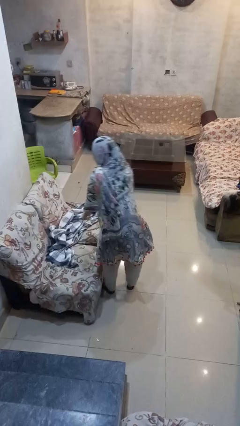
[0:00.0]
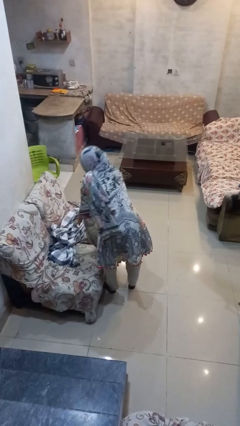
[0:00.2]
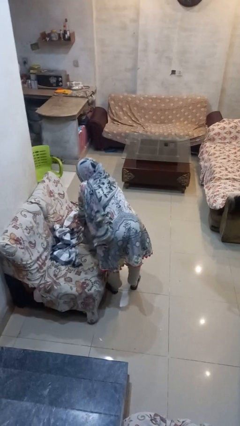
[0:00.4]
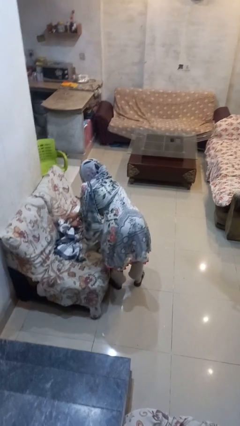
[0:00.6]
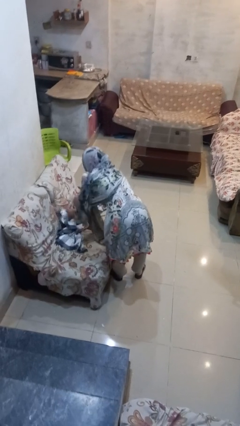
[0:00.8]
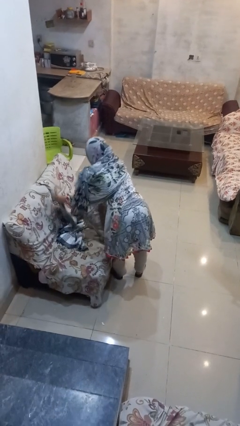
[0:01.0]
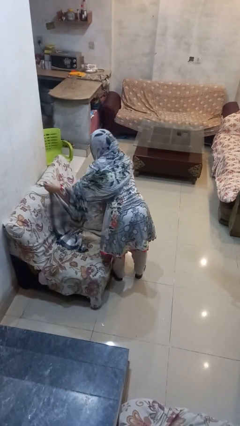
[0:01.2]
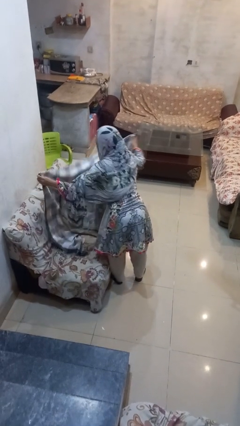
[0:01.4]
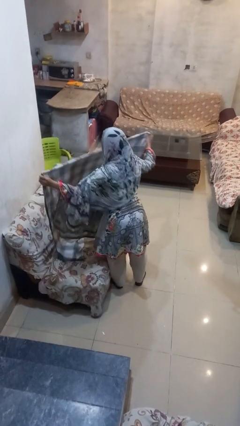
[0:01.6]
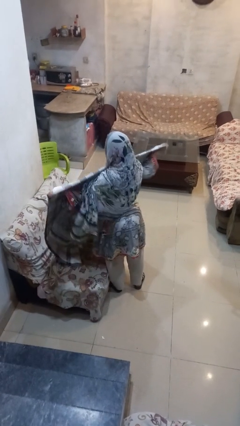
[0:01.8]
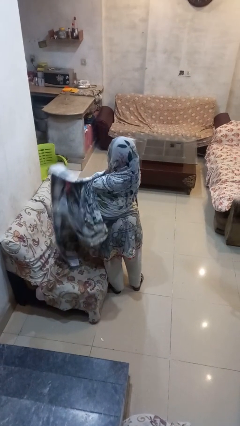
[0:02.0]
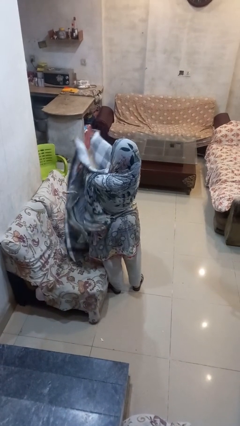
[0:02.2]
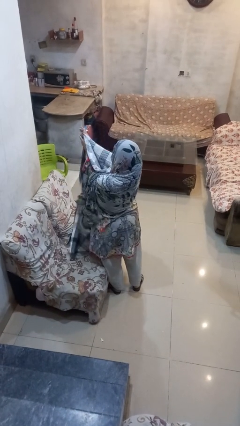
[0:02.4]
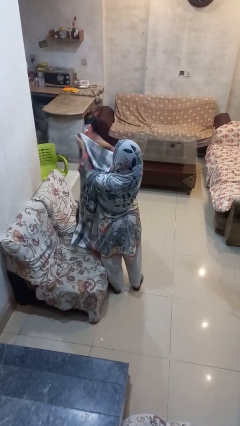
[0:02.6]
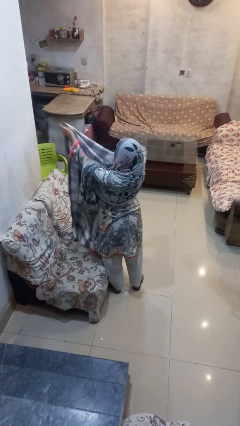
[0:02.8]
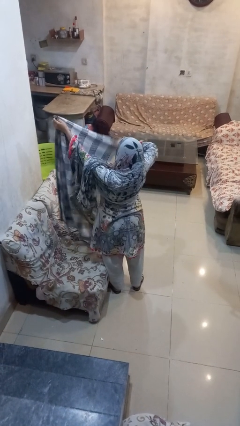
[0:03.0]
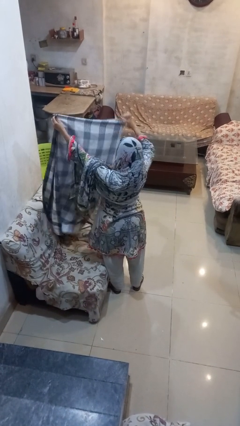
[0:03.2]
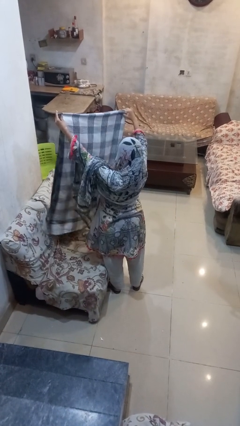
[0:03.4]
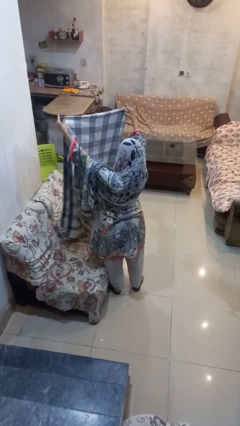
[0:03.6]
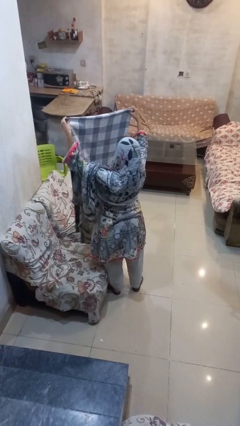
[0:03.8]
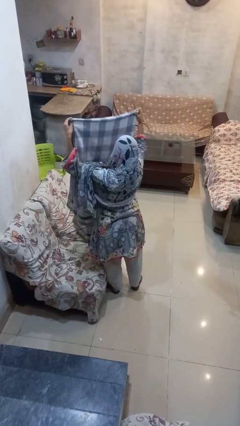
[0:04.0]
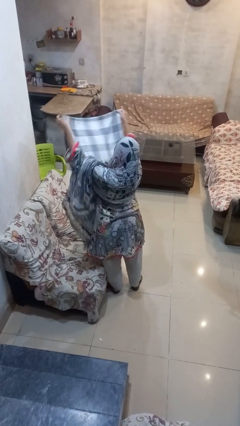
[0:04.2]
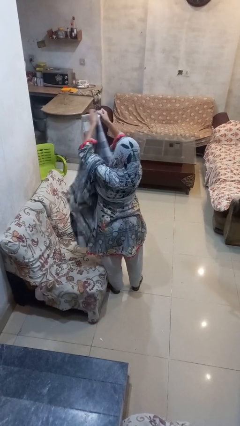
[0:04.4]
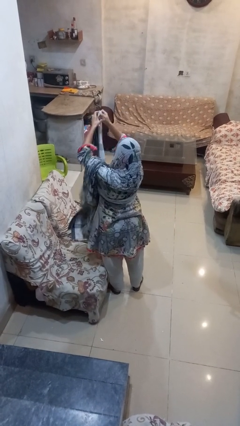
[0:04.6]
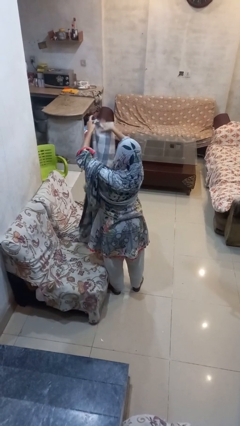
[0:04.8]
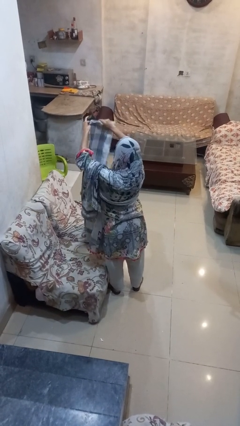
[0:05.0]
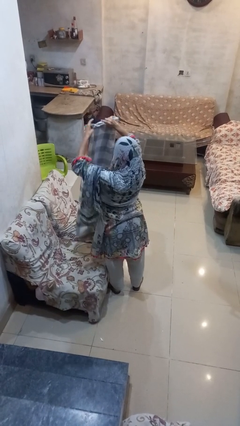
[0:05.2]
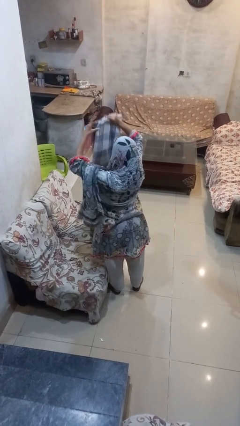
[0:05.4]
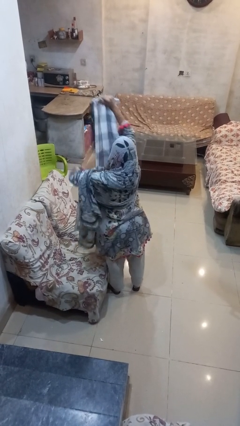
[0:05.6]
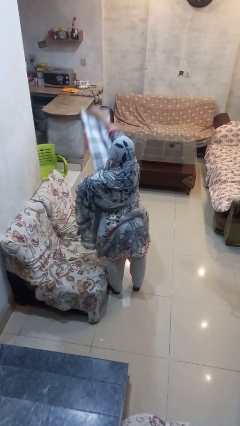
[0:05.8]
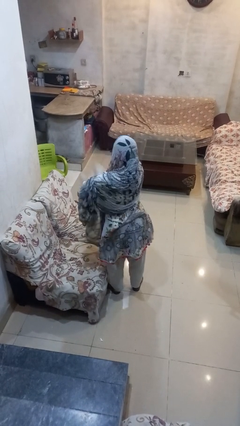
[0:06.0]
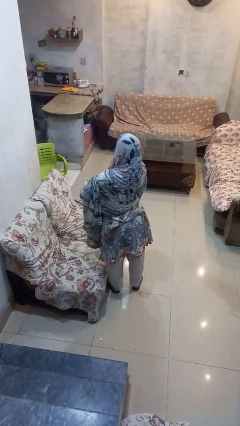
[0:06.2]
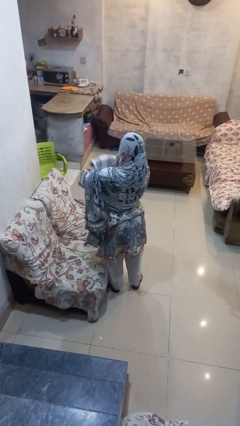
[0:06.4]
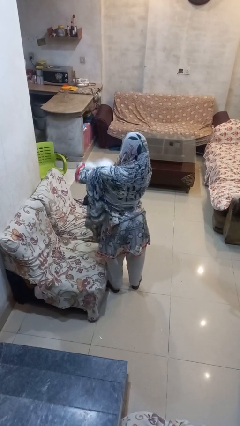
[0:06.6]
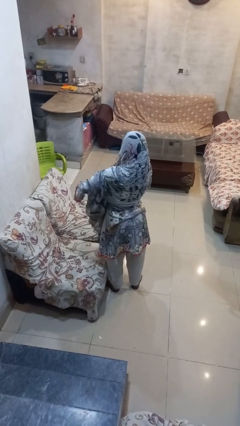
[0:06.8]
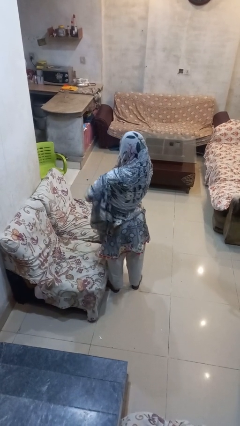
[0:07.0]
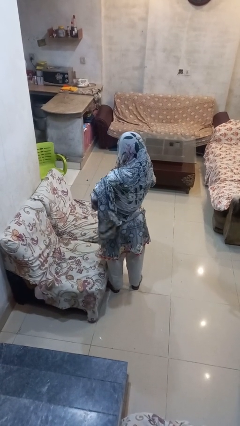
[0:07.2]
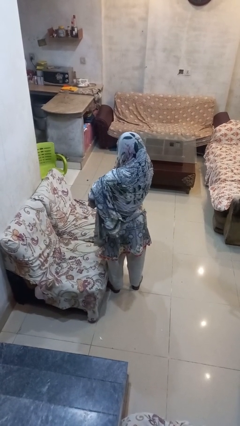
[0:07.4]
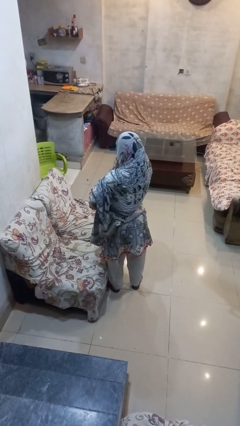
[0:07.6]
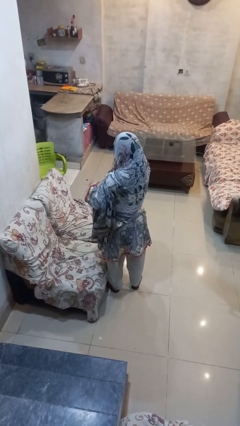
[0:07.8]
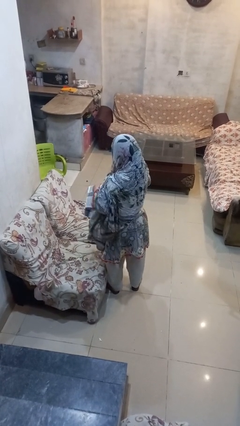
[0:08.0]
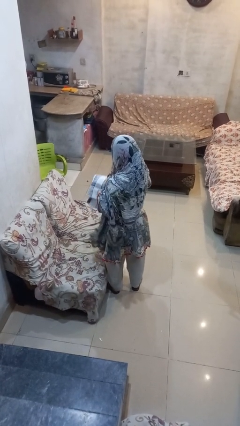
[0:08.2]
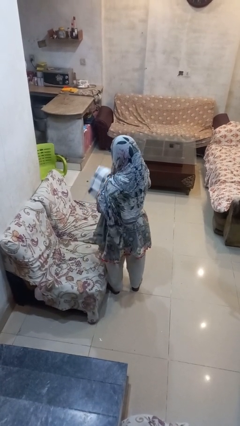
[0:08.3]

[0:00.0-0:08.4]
person folds blanket

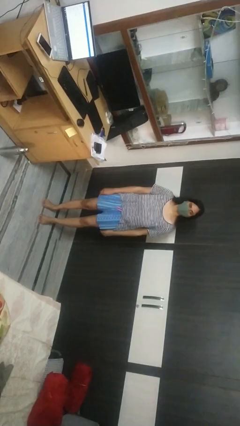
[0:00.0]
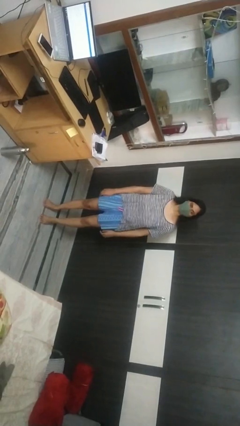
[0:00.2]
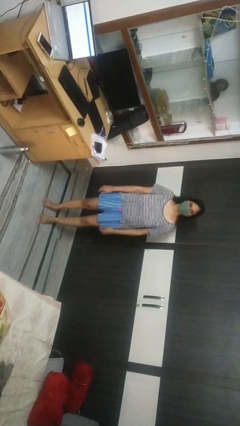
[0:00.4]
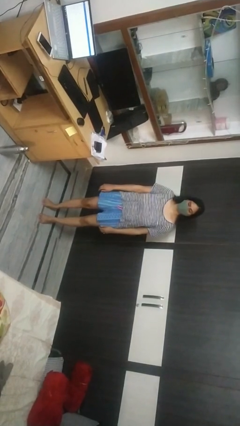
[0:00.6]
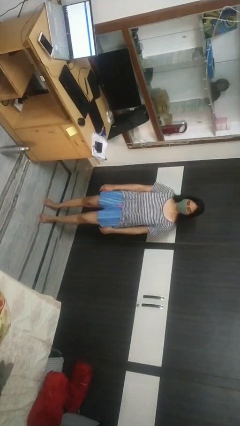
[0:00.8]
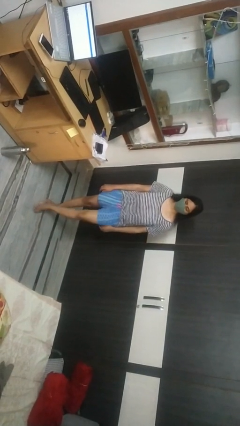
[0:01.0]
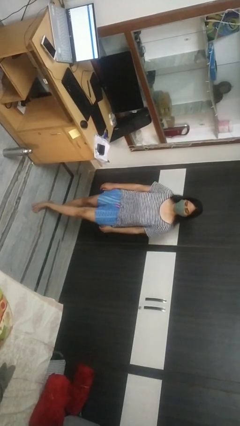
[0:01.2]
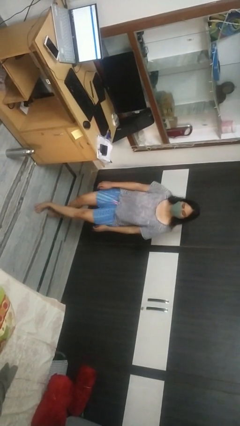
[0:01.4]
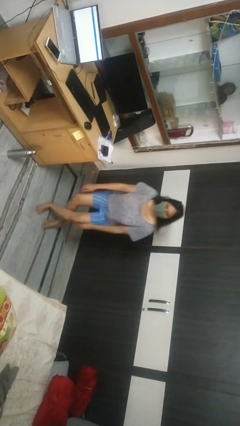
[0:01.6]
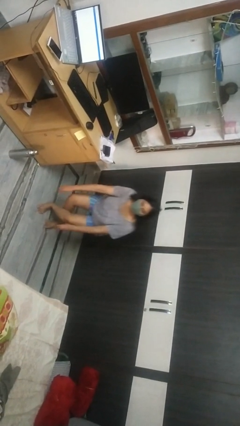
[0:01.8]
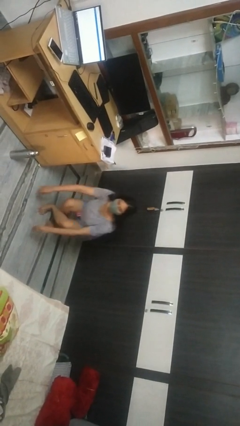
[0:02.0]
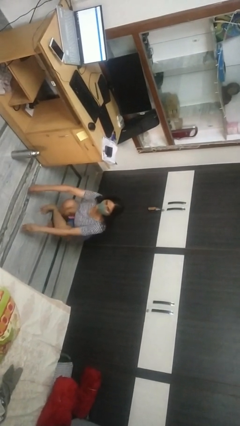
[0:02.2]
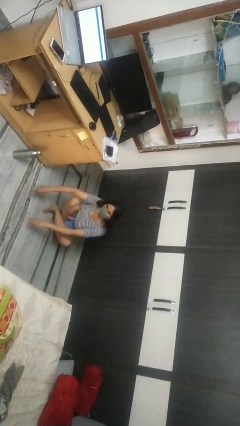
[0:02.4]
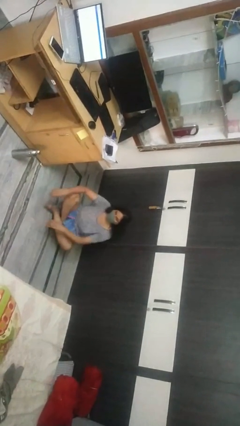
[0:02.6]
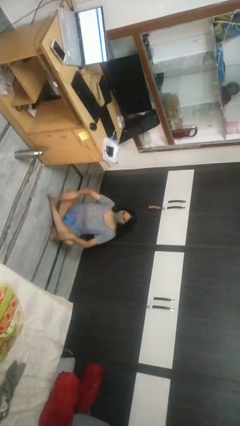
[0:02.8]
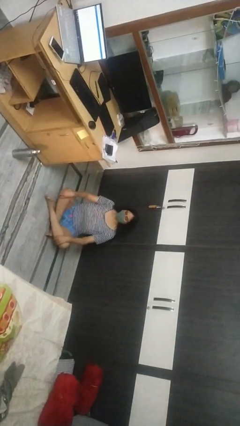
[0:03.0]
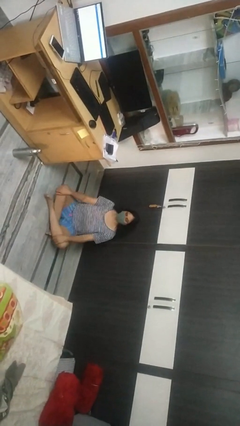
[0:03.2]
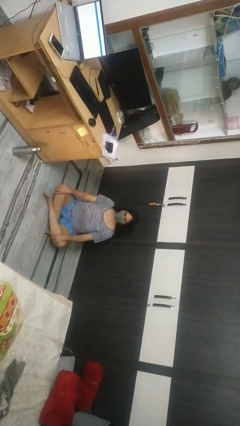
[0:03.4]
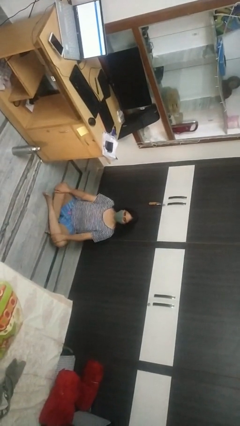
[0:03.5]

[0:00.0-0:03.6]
person sits crisscross

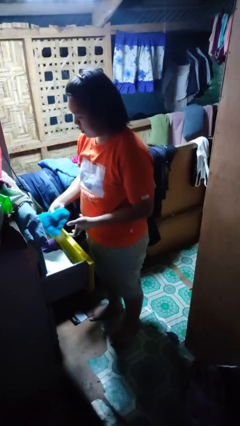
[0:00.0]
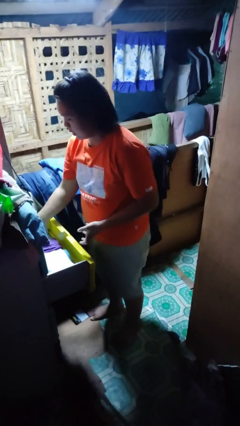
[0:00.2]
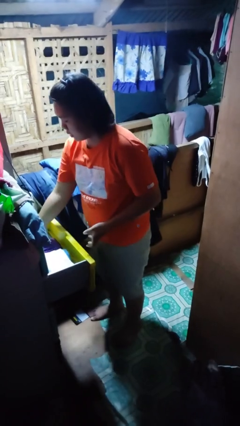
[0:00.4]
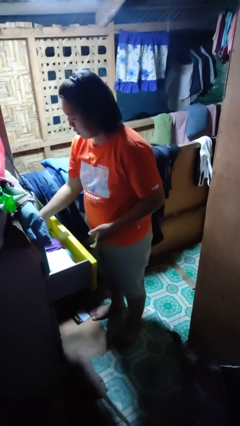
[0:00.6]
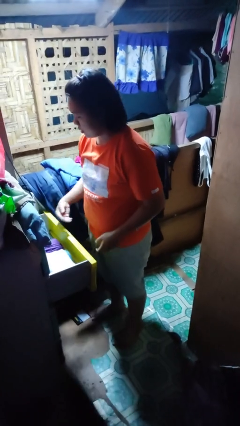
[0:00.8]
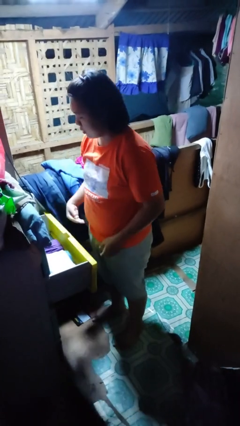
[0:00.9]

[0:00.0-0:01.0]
person puts clothes into dresser

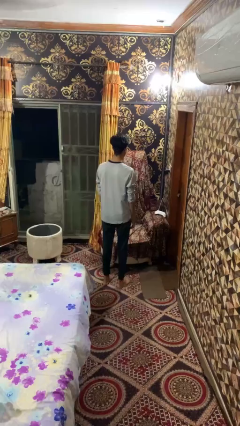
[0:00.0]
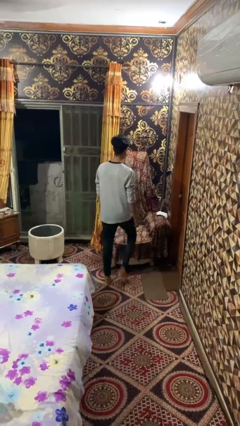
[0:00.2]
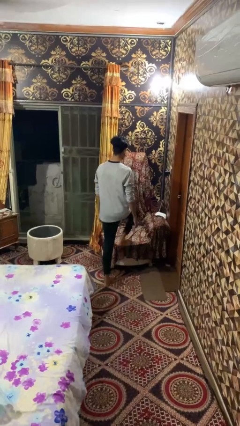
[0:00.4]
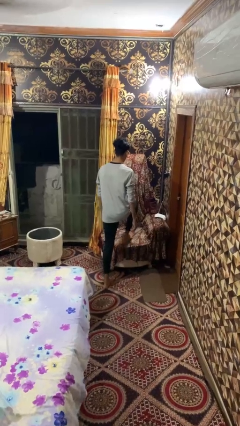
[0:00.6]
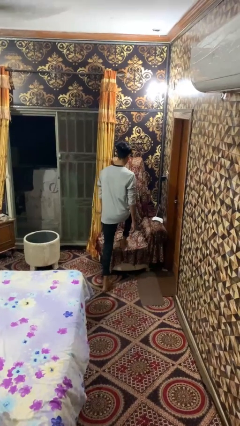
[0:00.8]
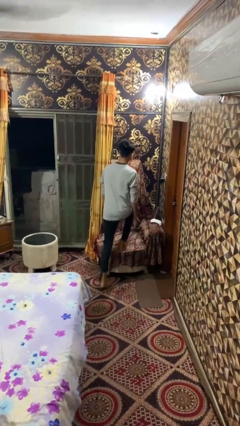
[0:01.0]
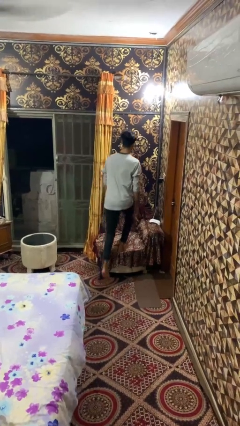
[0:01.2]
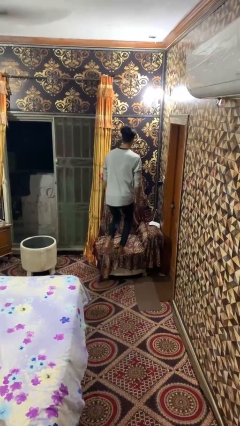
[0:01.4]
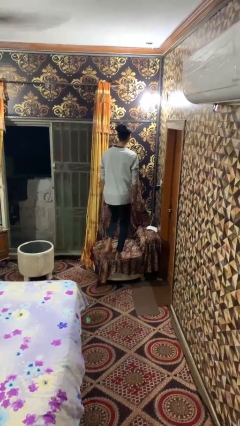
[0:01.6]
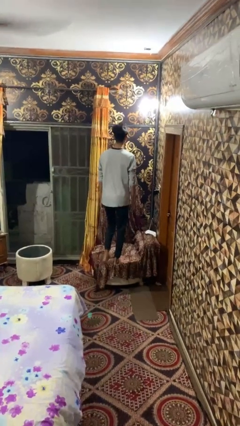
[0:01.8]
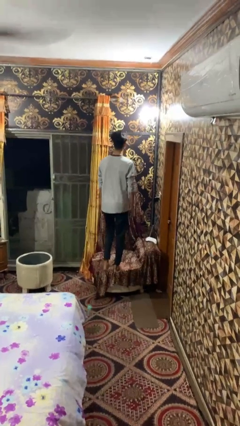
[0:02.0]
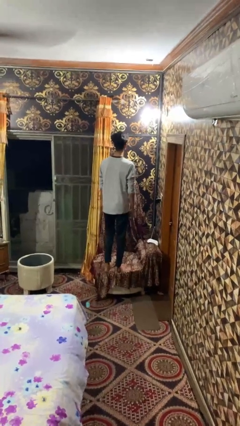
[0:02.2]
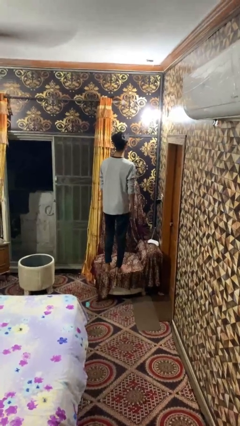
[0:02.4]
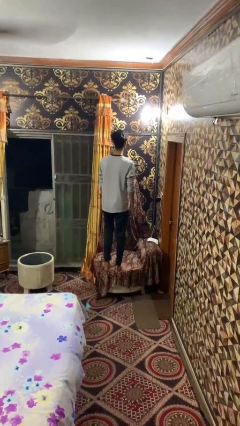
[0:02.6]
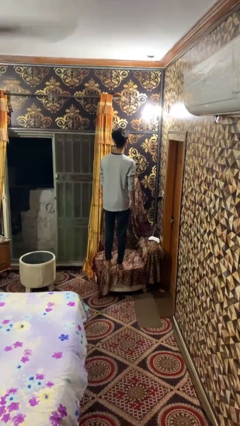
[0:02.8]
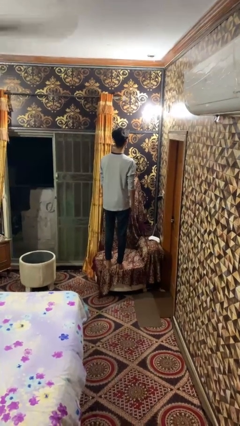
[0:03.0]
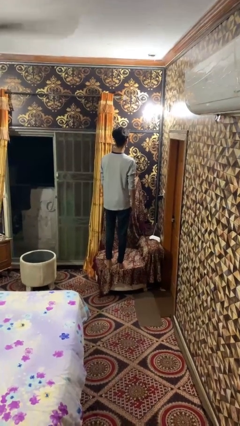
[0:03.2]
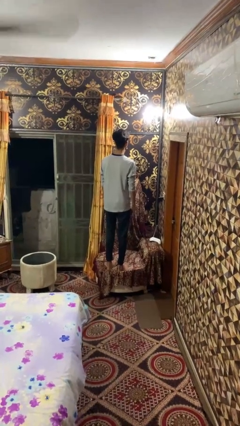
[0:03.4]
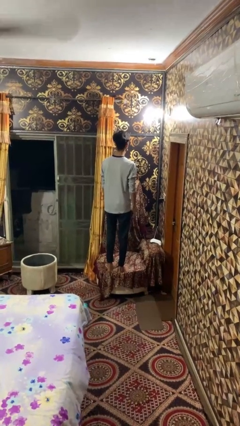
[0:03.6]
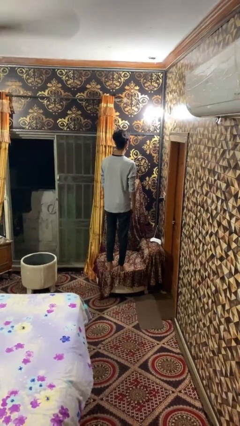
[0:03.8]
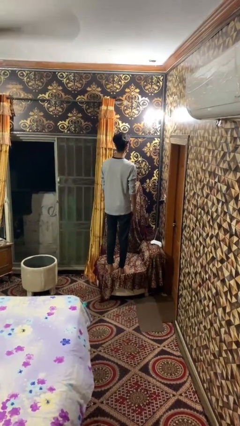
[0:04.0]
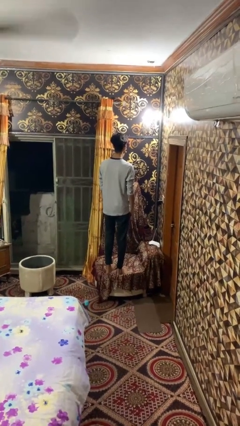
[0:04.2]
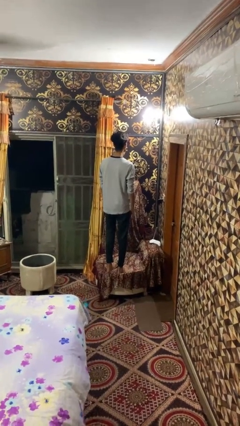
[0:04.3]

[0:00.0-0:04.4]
person climbs on couch

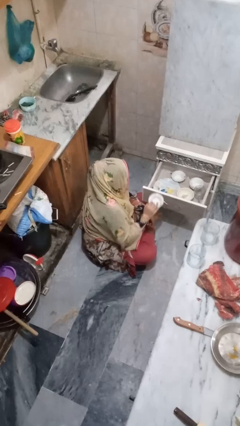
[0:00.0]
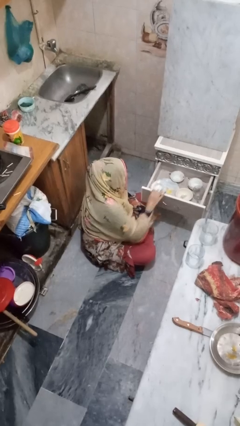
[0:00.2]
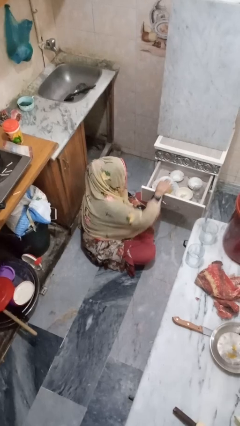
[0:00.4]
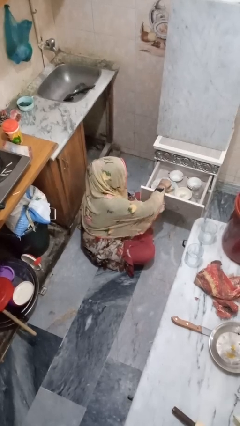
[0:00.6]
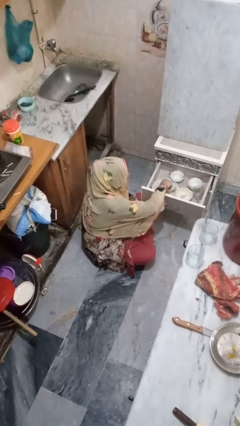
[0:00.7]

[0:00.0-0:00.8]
person puts object into kitchen drawer
